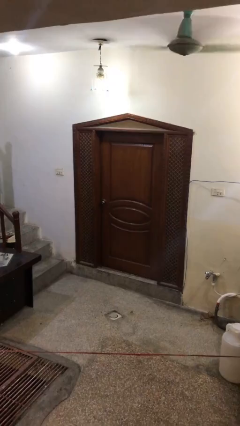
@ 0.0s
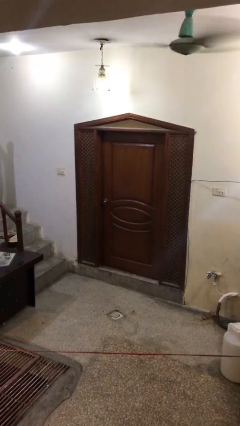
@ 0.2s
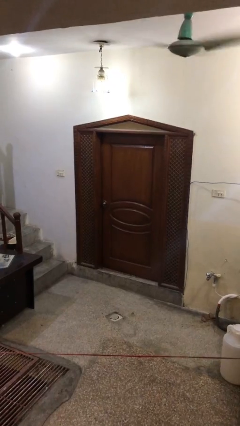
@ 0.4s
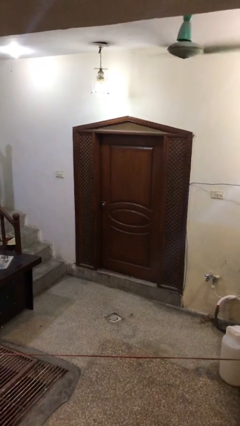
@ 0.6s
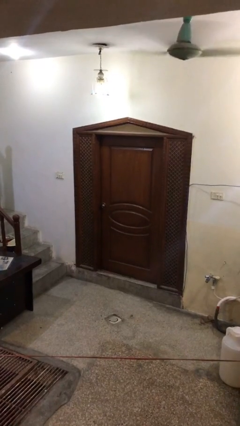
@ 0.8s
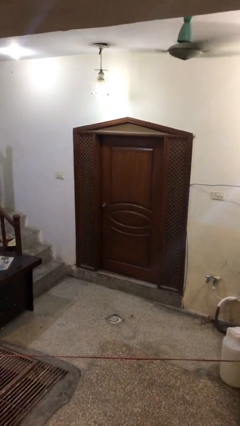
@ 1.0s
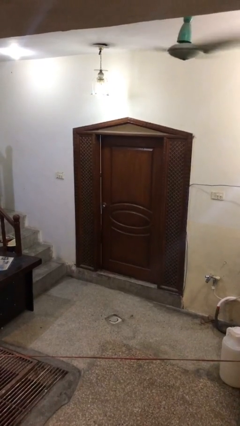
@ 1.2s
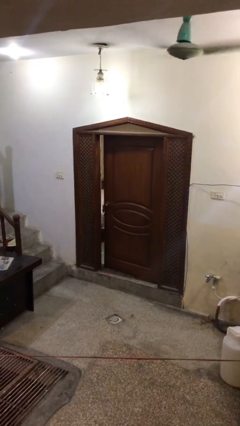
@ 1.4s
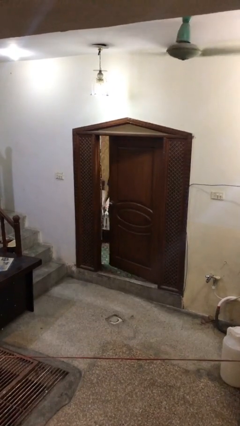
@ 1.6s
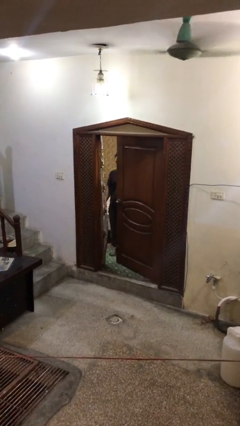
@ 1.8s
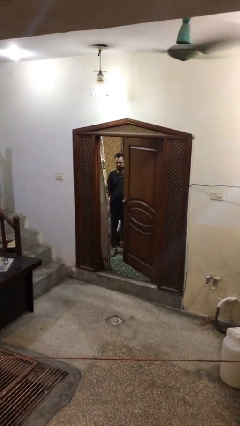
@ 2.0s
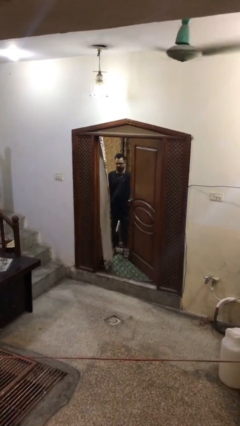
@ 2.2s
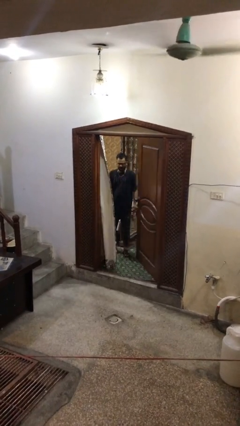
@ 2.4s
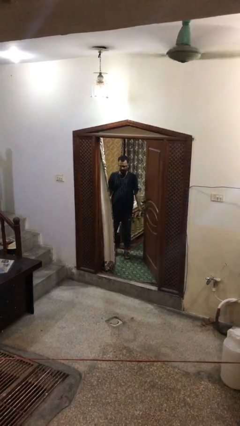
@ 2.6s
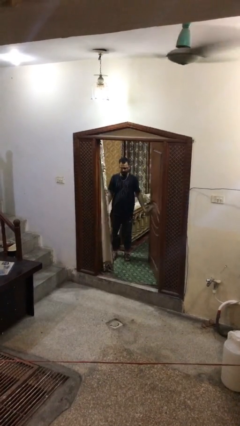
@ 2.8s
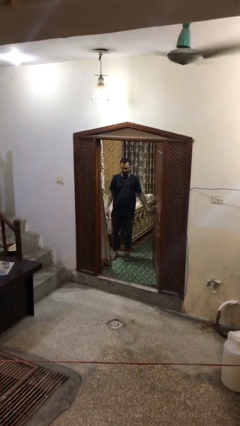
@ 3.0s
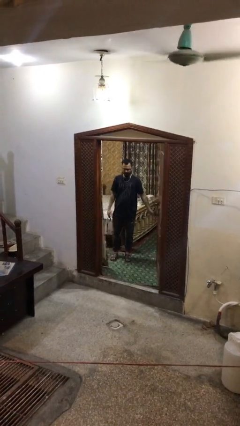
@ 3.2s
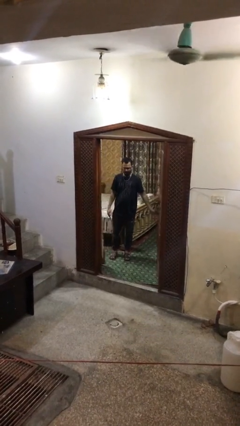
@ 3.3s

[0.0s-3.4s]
person opens facility door

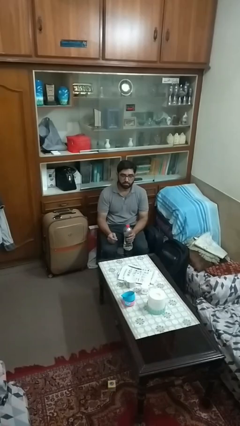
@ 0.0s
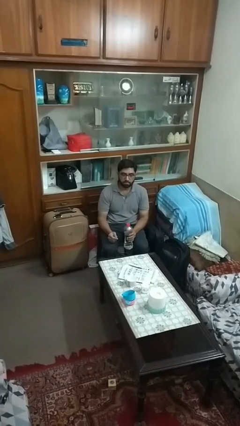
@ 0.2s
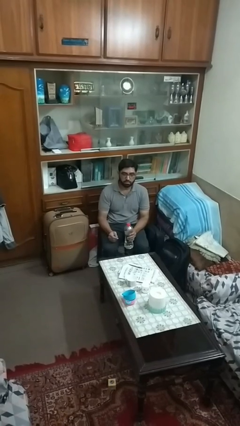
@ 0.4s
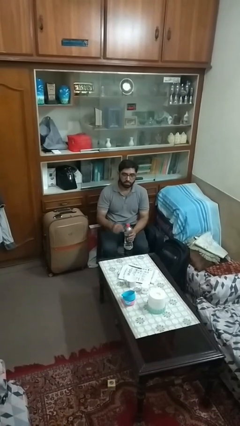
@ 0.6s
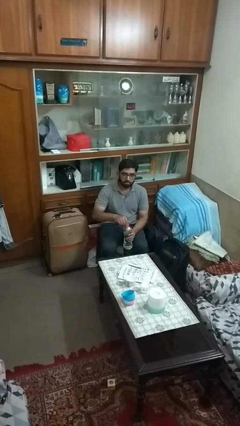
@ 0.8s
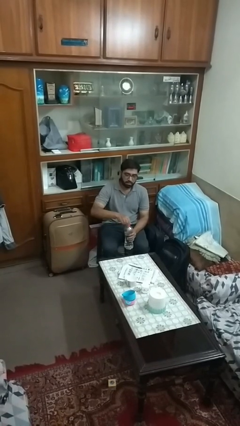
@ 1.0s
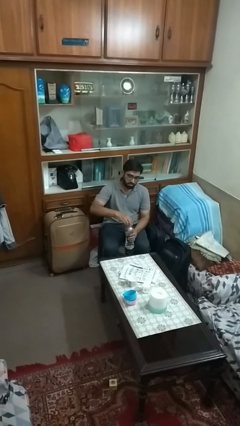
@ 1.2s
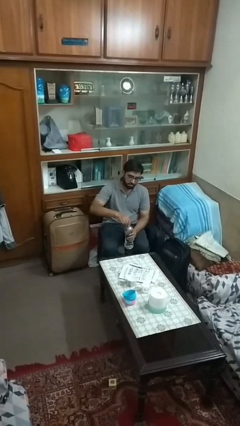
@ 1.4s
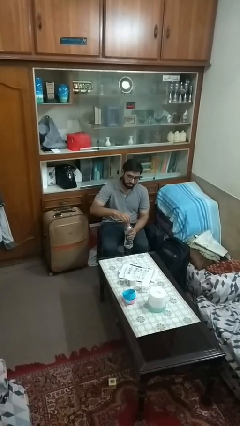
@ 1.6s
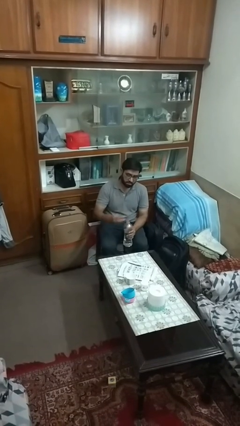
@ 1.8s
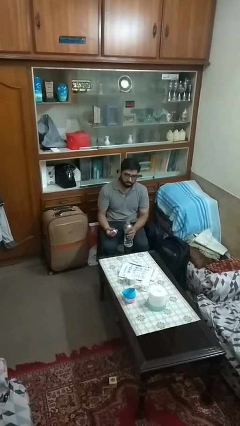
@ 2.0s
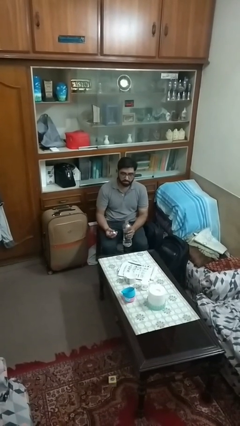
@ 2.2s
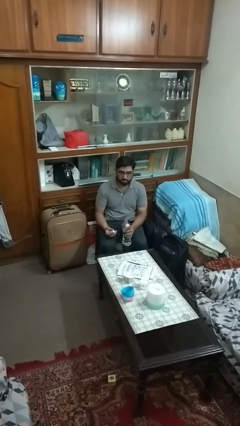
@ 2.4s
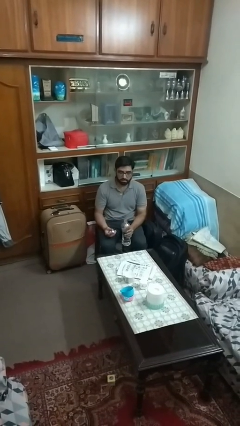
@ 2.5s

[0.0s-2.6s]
person unscrews lid from bottle

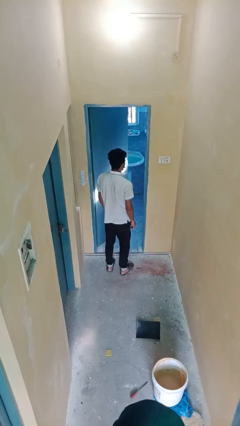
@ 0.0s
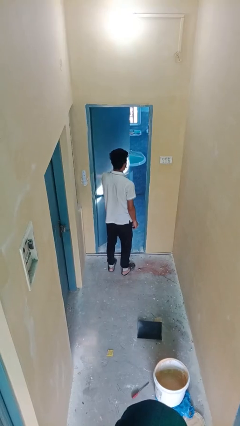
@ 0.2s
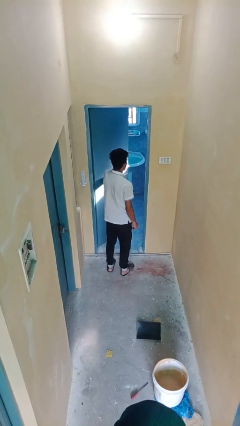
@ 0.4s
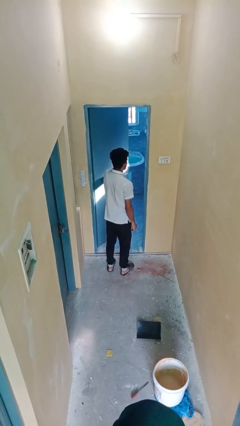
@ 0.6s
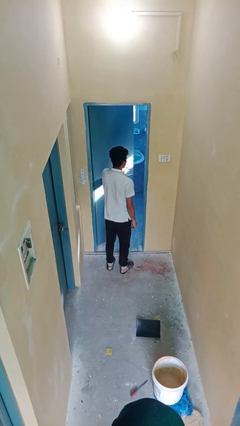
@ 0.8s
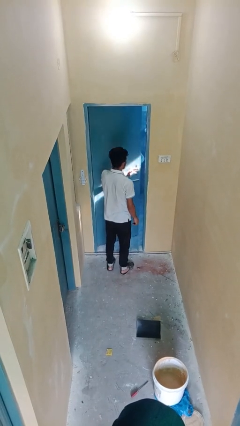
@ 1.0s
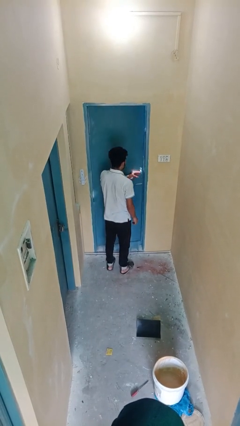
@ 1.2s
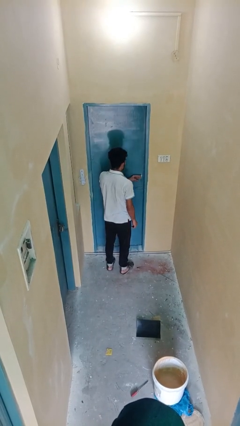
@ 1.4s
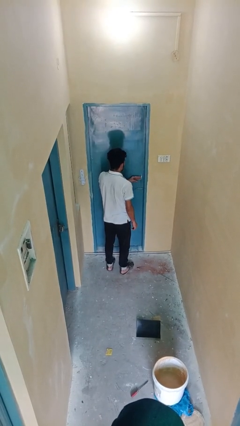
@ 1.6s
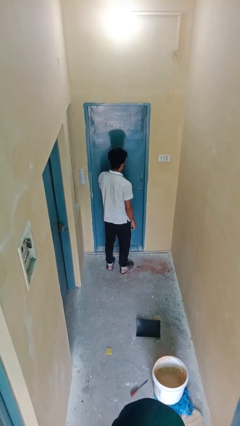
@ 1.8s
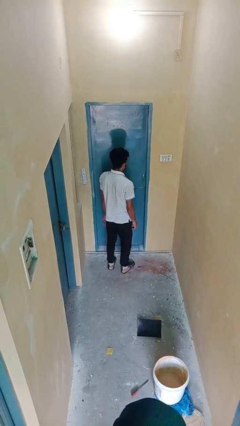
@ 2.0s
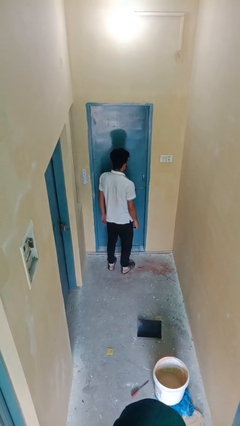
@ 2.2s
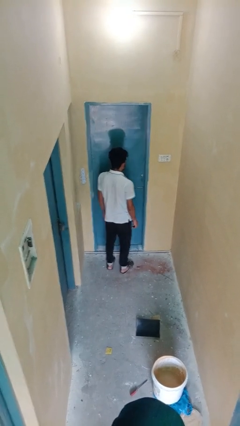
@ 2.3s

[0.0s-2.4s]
person closes facility door

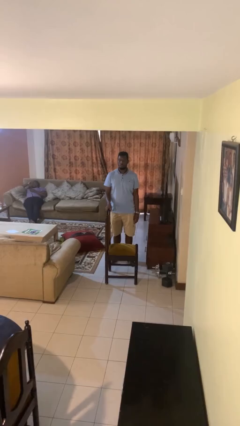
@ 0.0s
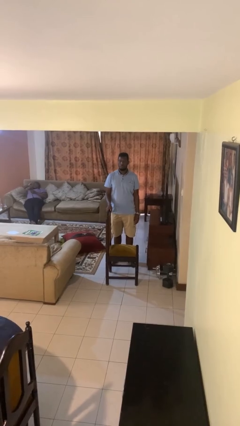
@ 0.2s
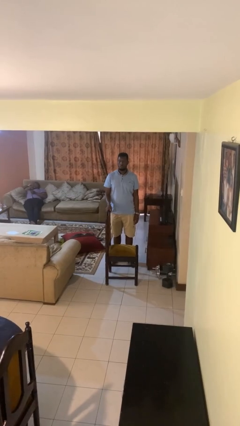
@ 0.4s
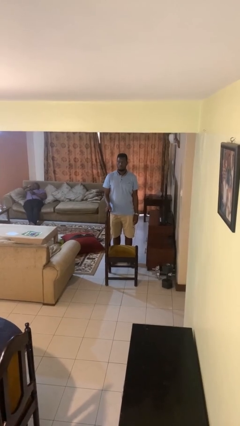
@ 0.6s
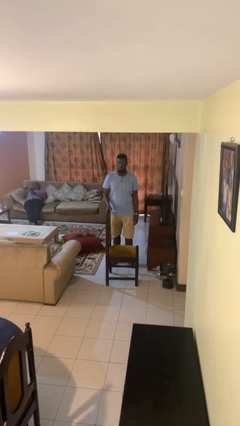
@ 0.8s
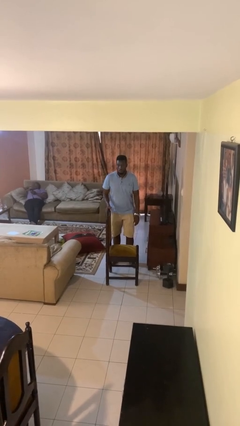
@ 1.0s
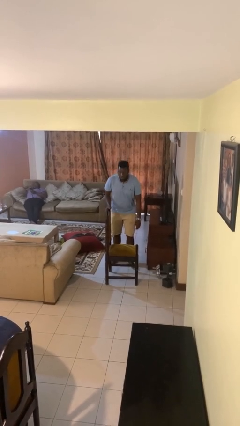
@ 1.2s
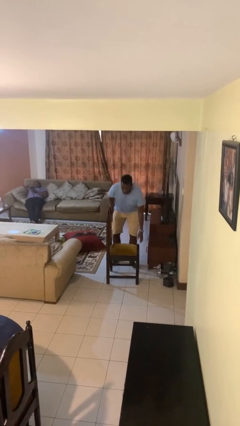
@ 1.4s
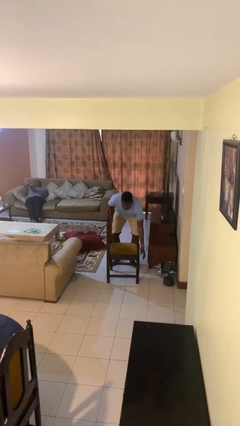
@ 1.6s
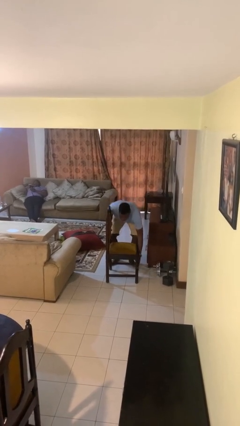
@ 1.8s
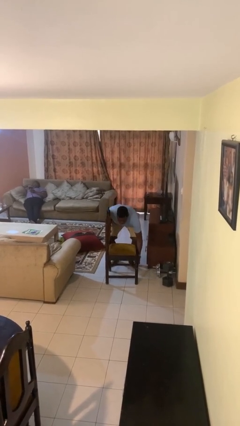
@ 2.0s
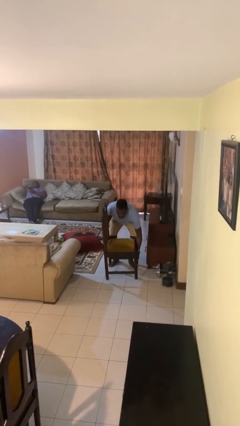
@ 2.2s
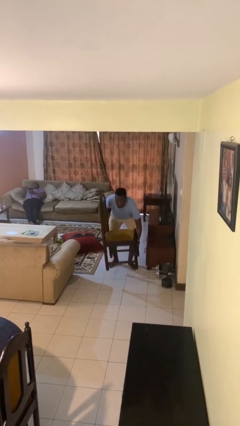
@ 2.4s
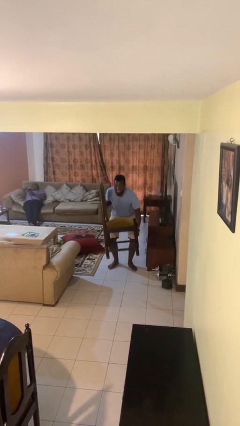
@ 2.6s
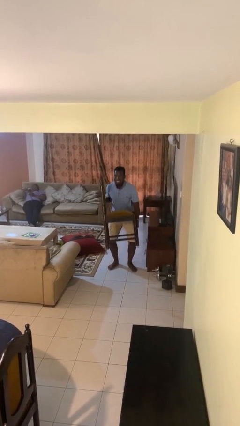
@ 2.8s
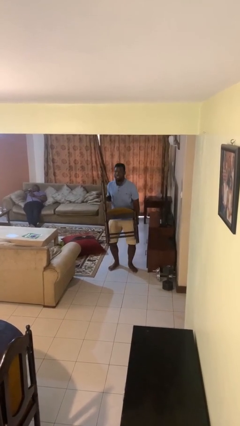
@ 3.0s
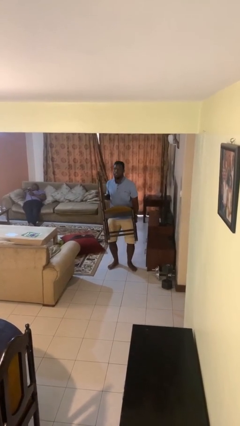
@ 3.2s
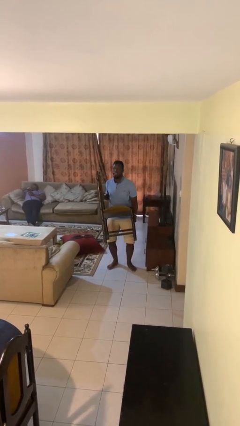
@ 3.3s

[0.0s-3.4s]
person picks up object from floor

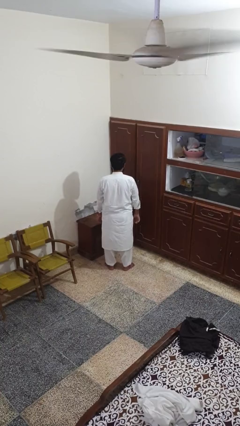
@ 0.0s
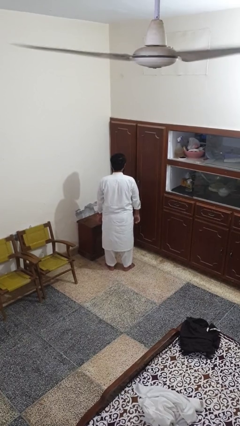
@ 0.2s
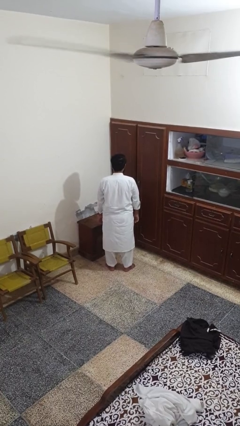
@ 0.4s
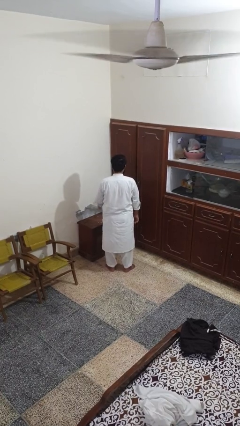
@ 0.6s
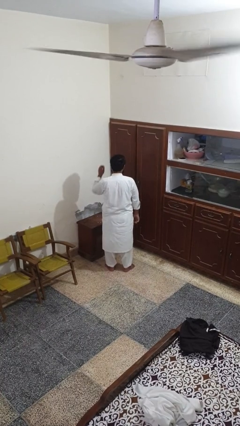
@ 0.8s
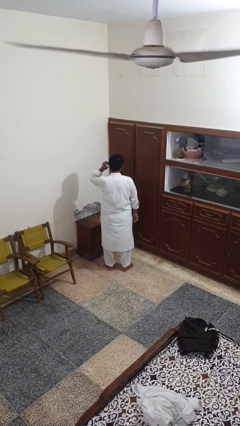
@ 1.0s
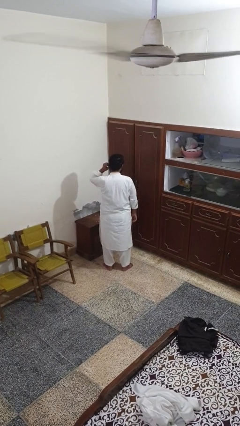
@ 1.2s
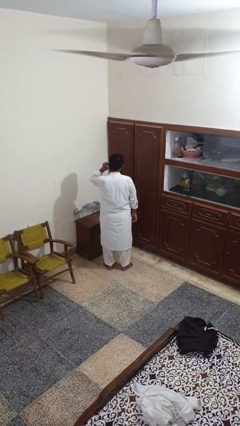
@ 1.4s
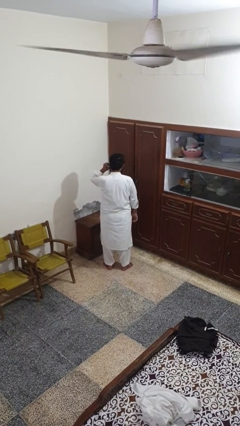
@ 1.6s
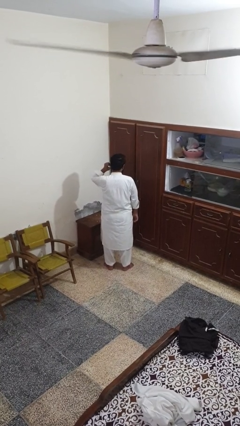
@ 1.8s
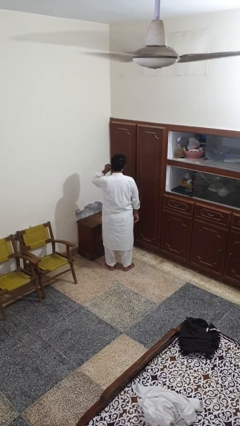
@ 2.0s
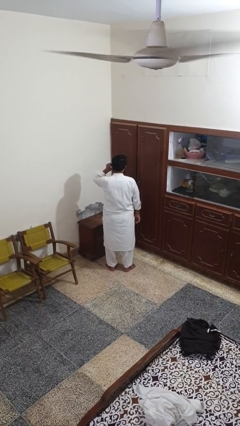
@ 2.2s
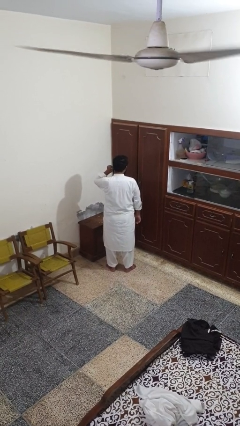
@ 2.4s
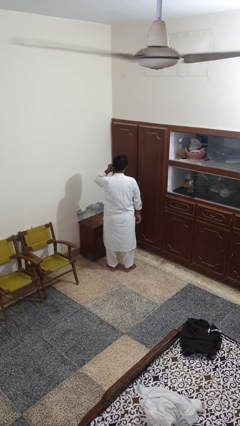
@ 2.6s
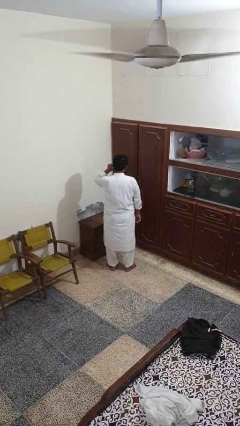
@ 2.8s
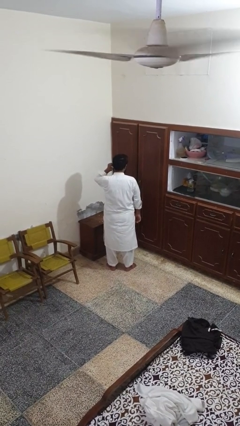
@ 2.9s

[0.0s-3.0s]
person touches earlobe

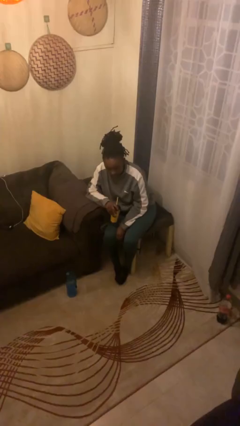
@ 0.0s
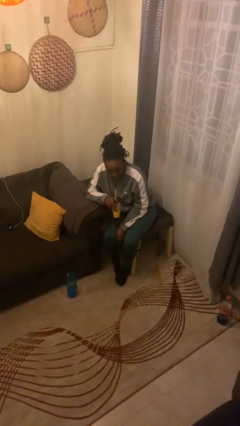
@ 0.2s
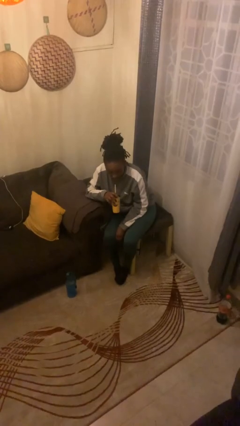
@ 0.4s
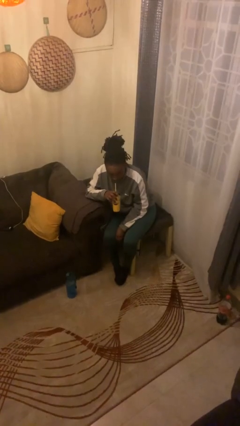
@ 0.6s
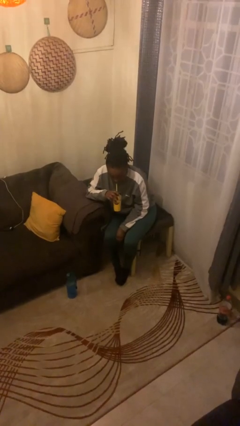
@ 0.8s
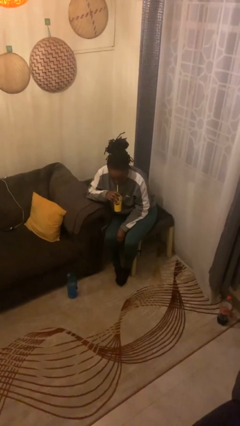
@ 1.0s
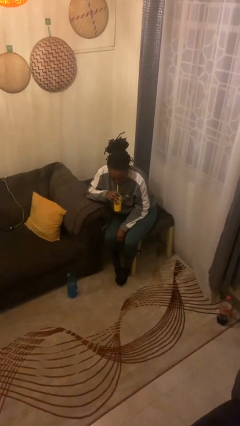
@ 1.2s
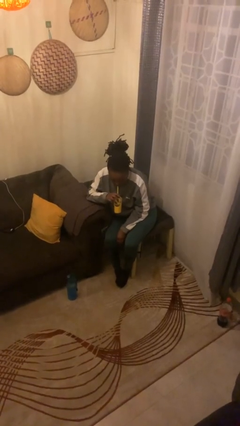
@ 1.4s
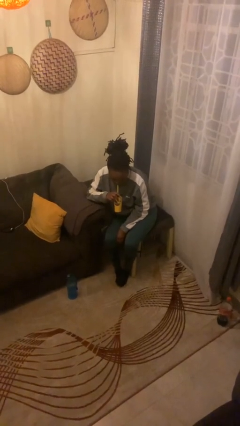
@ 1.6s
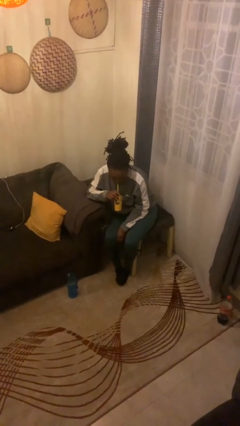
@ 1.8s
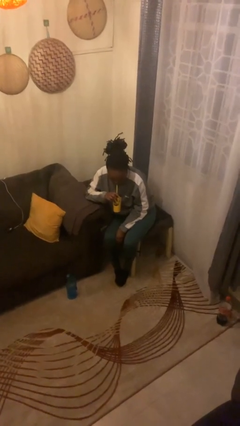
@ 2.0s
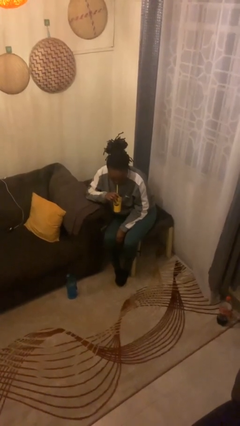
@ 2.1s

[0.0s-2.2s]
person drinks from straw

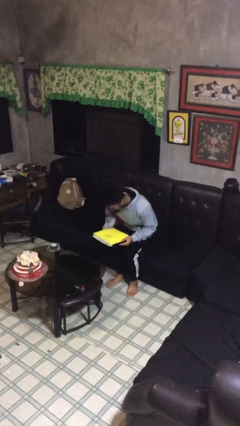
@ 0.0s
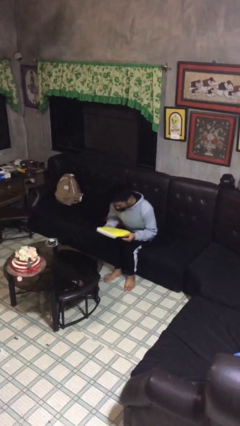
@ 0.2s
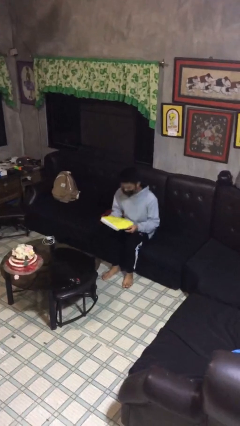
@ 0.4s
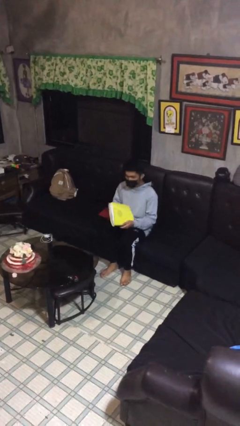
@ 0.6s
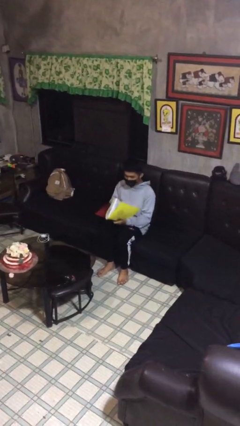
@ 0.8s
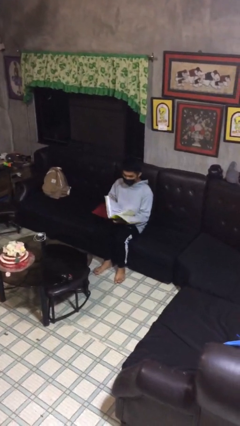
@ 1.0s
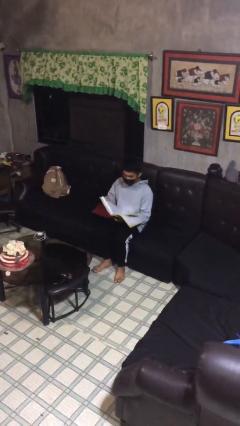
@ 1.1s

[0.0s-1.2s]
person sits down
